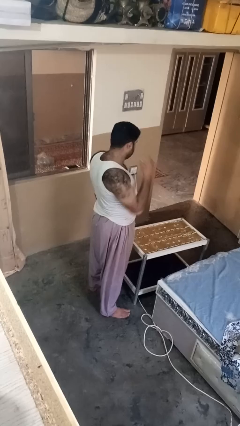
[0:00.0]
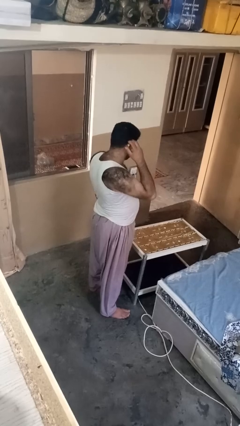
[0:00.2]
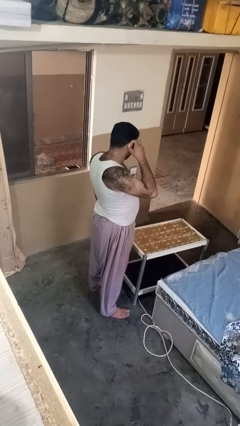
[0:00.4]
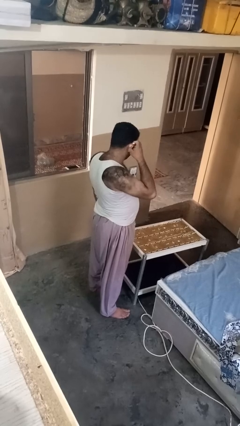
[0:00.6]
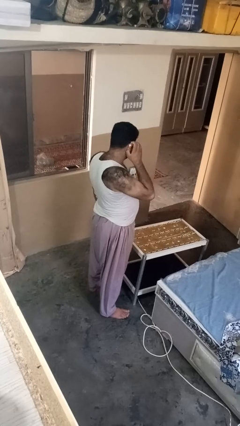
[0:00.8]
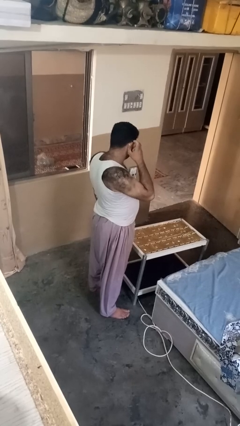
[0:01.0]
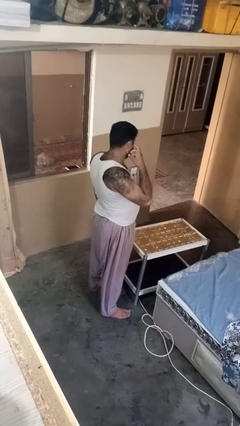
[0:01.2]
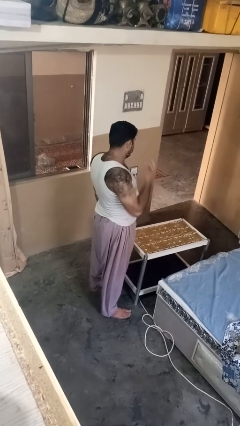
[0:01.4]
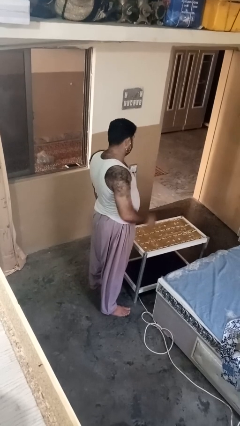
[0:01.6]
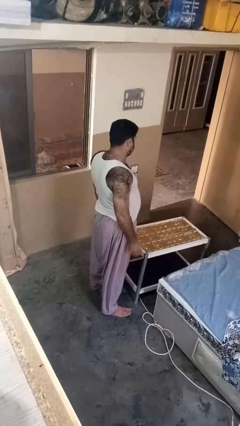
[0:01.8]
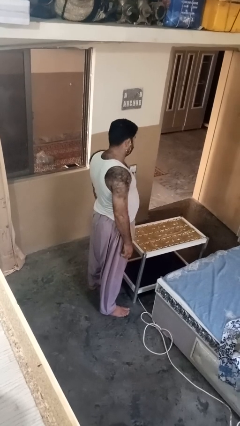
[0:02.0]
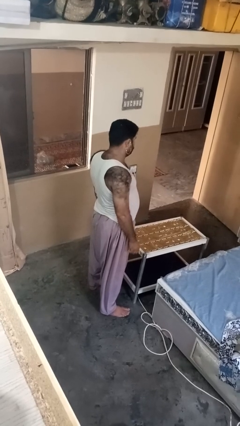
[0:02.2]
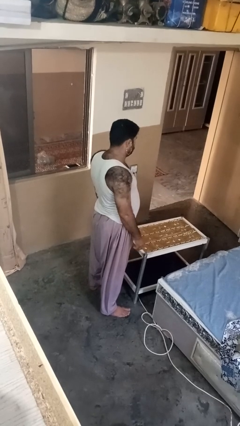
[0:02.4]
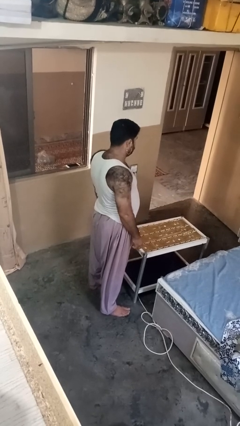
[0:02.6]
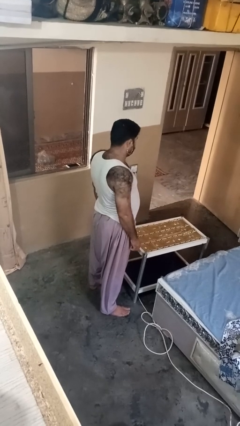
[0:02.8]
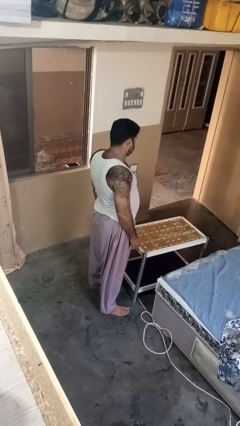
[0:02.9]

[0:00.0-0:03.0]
person puts on earrings

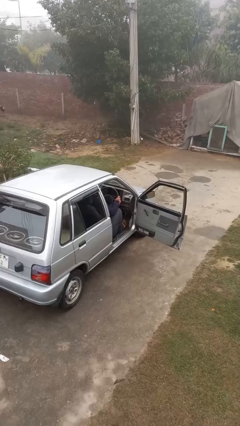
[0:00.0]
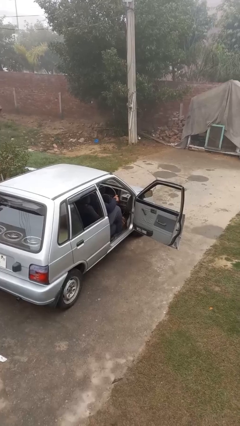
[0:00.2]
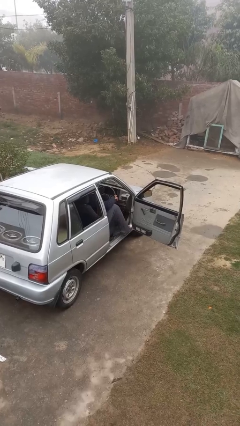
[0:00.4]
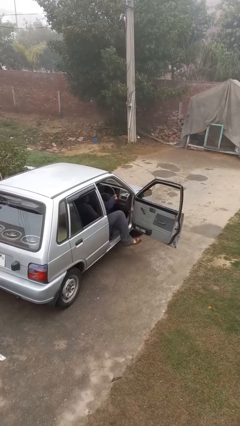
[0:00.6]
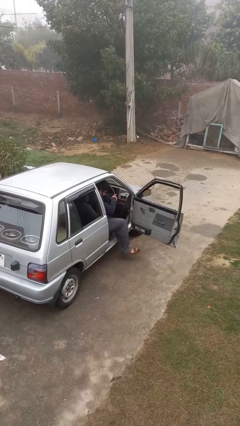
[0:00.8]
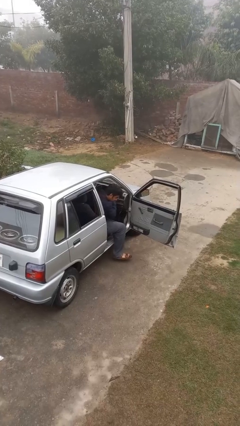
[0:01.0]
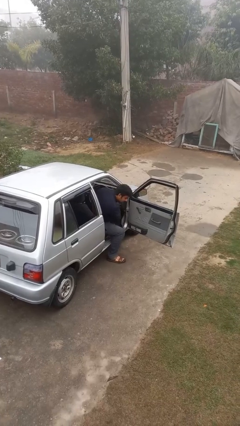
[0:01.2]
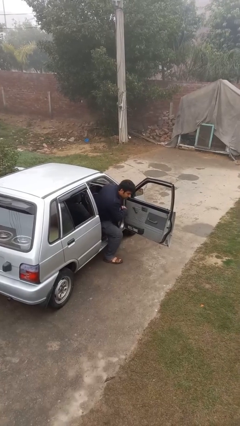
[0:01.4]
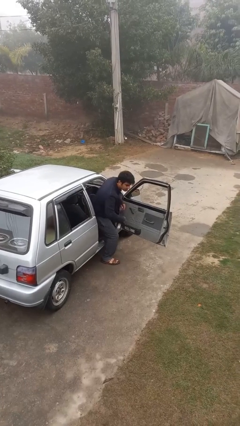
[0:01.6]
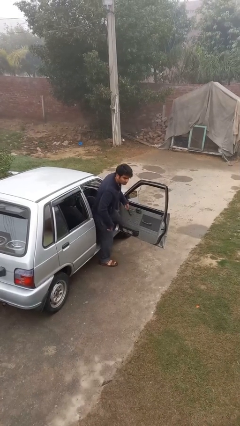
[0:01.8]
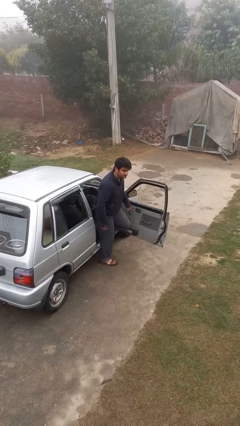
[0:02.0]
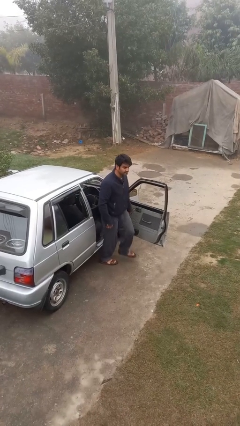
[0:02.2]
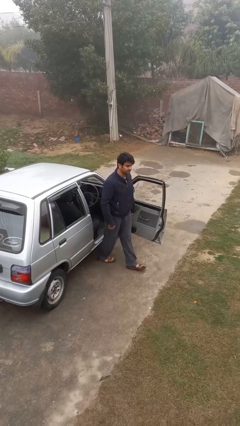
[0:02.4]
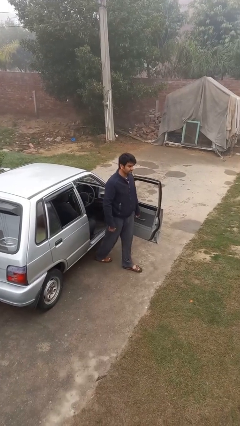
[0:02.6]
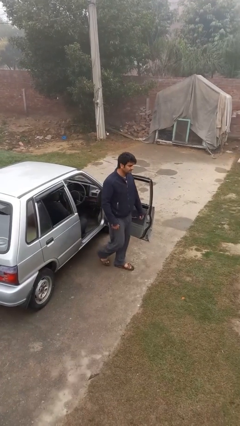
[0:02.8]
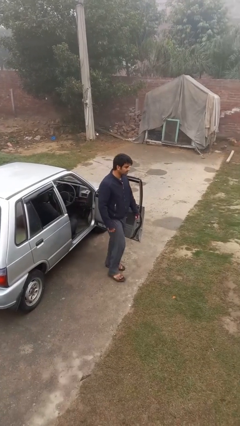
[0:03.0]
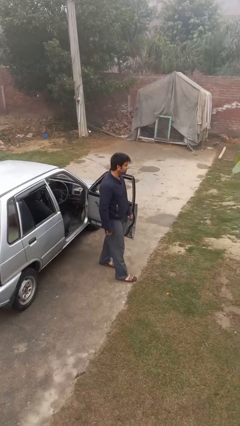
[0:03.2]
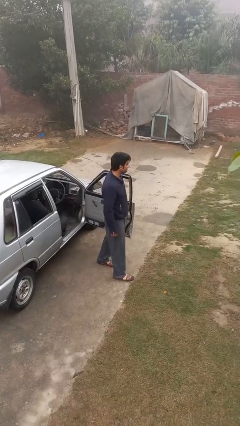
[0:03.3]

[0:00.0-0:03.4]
person exits car

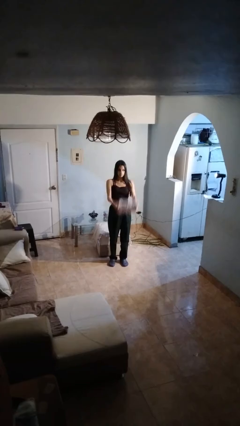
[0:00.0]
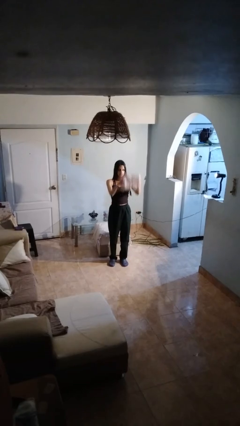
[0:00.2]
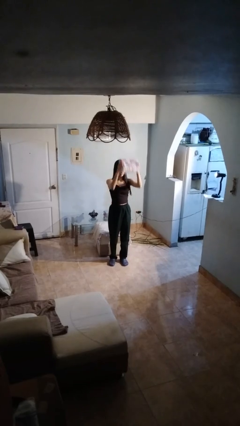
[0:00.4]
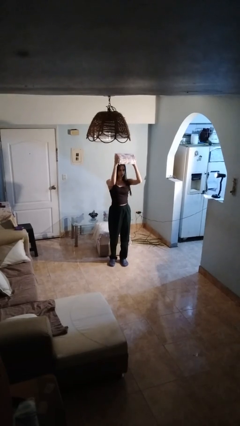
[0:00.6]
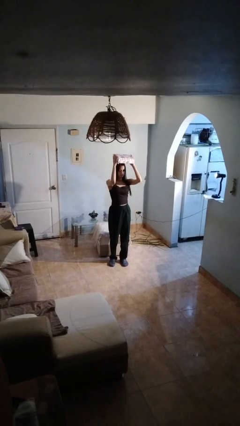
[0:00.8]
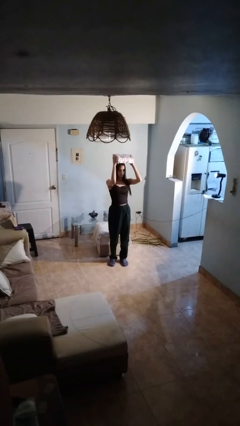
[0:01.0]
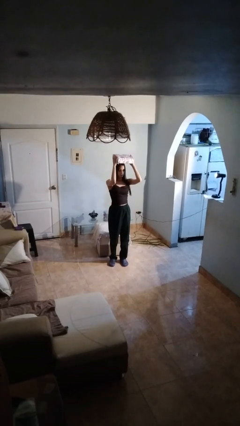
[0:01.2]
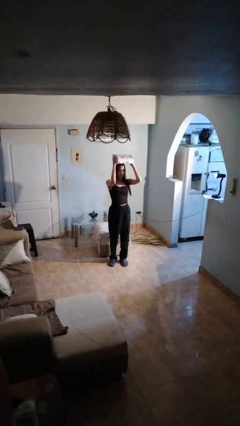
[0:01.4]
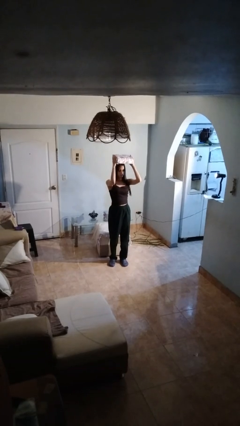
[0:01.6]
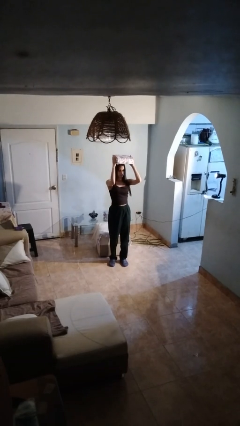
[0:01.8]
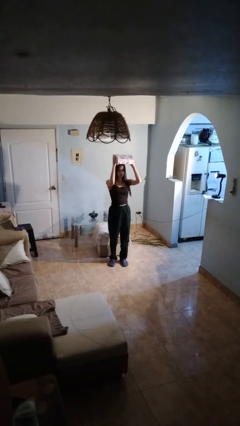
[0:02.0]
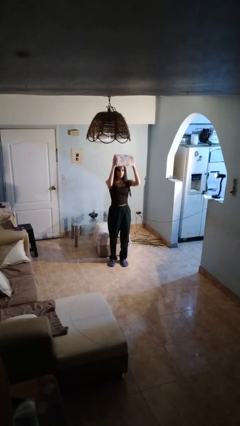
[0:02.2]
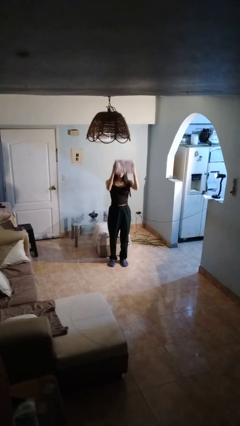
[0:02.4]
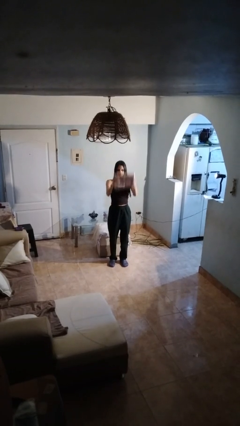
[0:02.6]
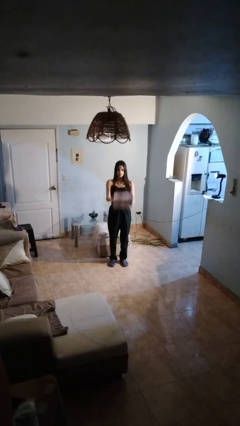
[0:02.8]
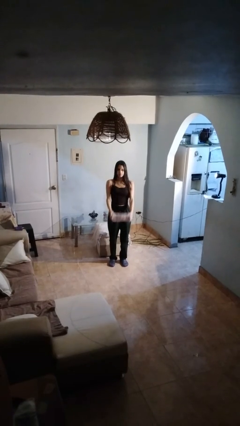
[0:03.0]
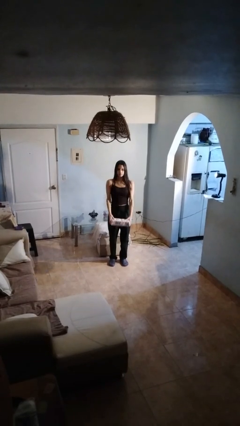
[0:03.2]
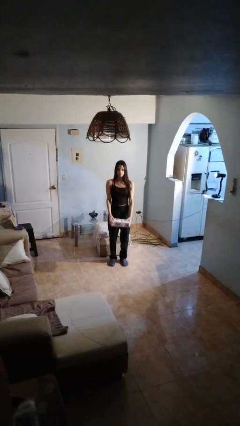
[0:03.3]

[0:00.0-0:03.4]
person holds object above head

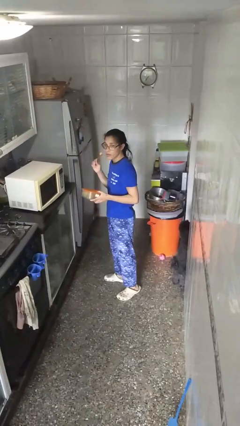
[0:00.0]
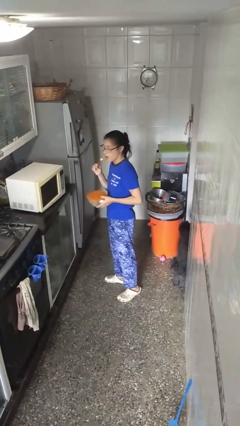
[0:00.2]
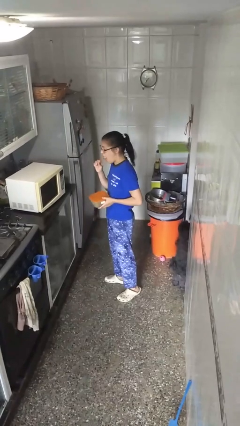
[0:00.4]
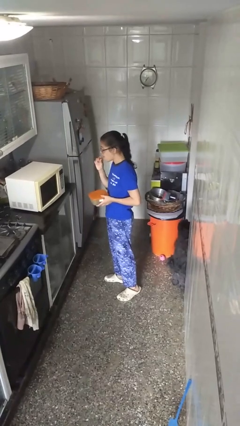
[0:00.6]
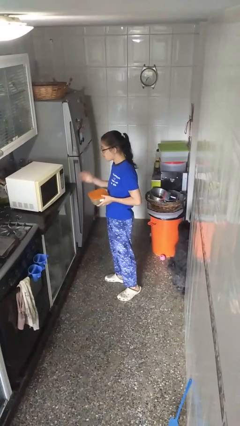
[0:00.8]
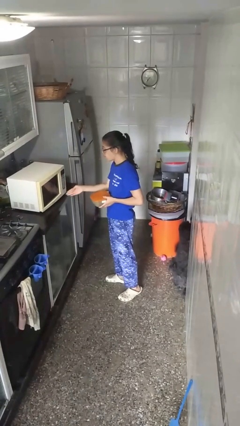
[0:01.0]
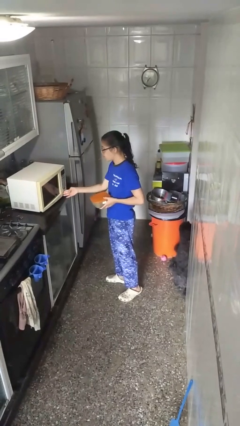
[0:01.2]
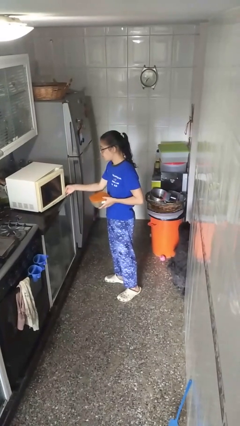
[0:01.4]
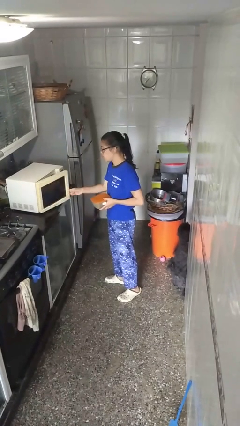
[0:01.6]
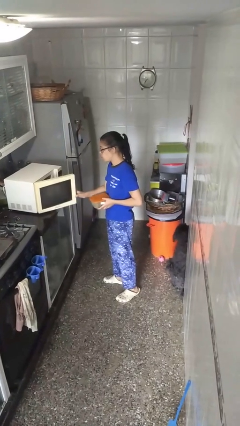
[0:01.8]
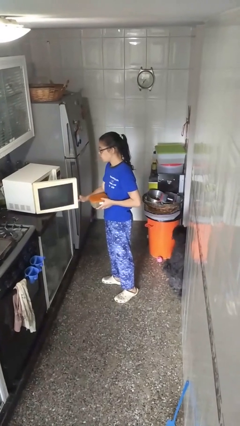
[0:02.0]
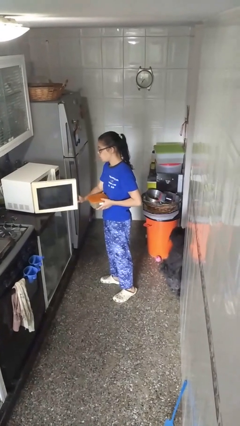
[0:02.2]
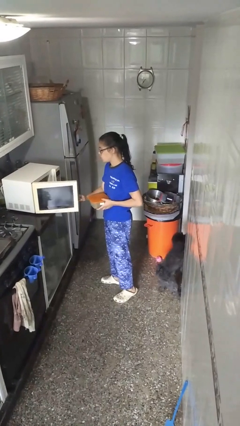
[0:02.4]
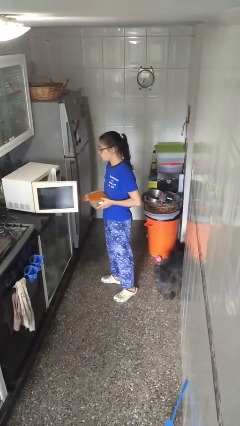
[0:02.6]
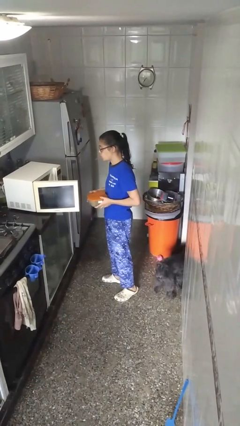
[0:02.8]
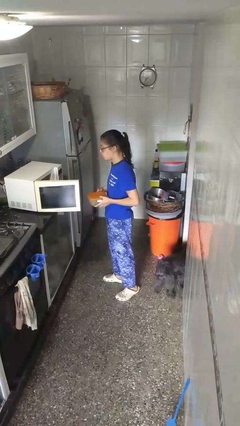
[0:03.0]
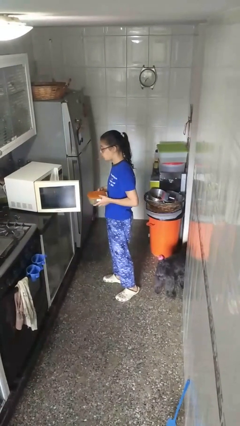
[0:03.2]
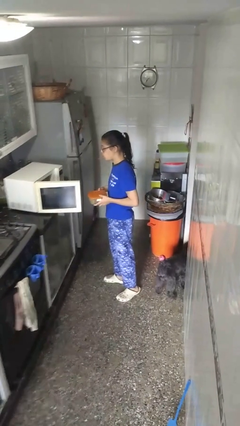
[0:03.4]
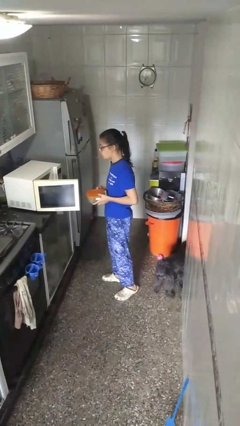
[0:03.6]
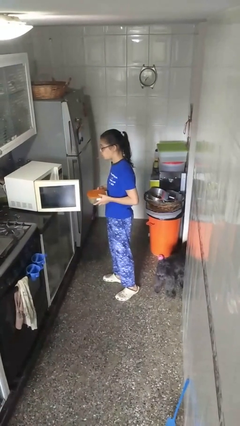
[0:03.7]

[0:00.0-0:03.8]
person opens microwave

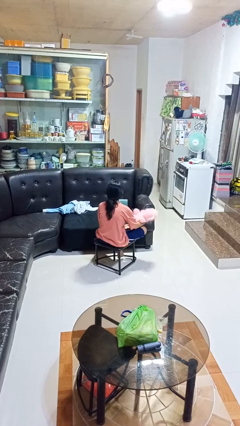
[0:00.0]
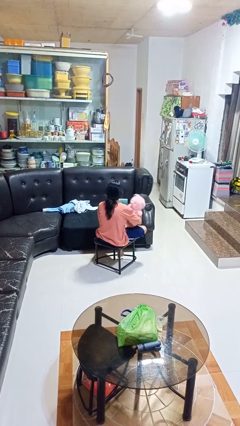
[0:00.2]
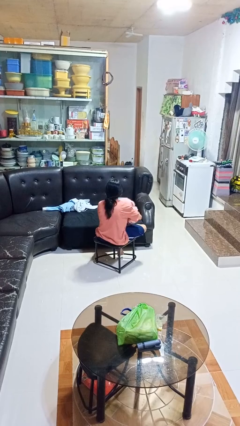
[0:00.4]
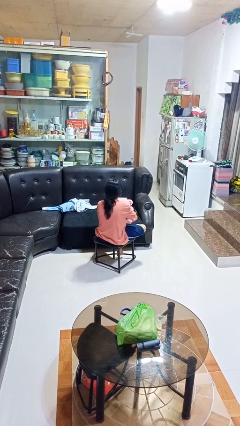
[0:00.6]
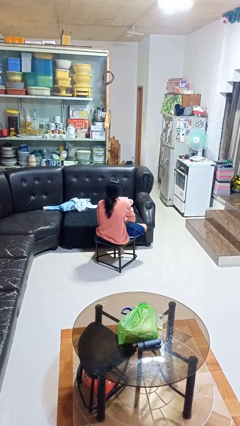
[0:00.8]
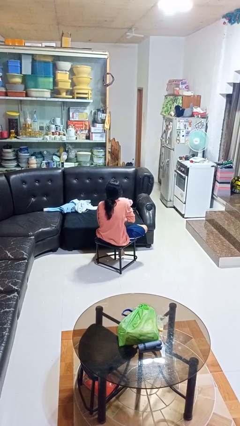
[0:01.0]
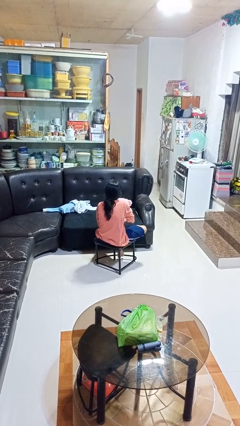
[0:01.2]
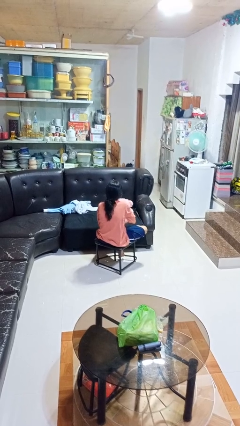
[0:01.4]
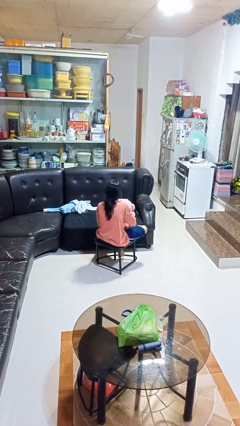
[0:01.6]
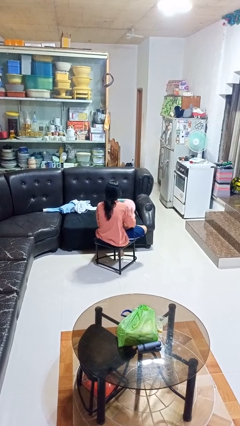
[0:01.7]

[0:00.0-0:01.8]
person hugs stuffed animal

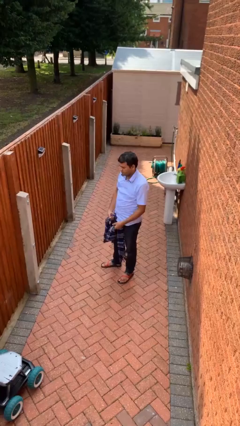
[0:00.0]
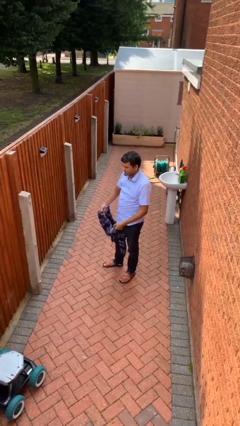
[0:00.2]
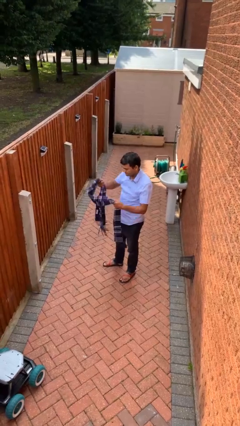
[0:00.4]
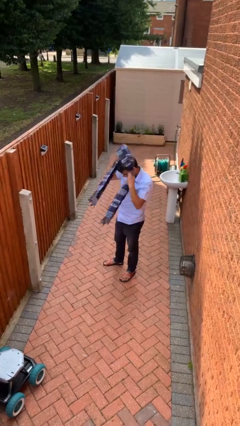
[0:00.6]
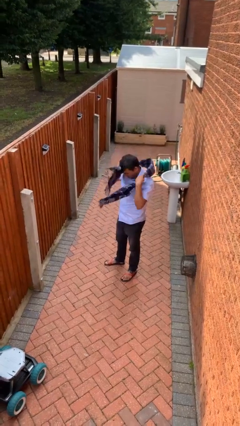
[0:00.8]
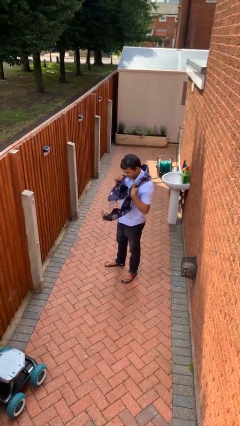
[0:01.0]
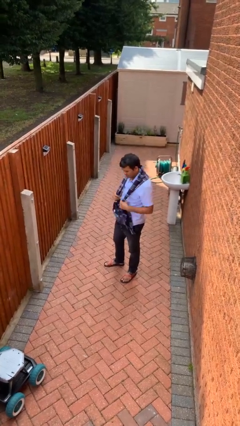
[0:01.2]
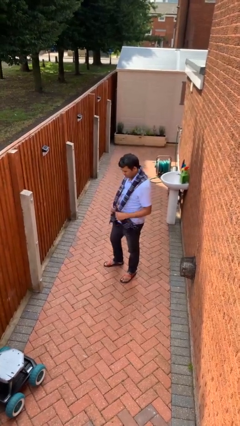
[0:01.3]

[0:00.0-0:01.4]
person puts on scarf

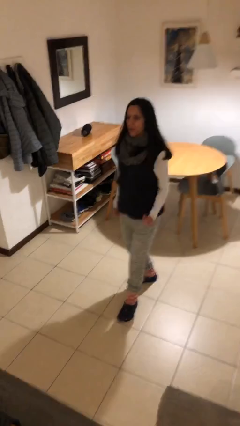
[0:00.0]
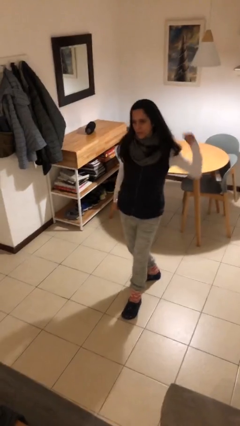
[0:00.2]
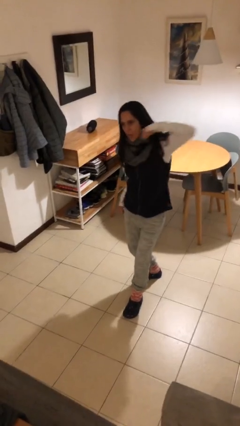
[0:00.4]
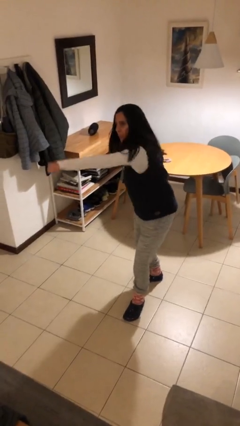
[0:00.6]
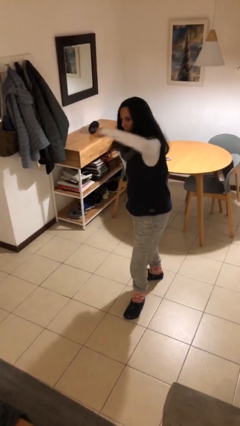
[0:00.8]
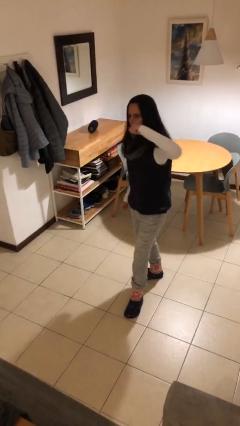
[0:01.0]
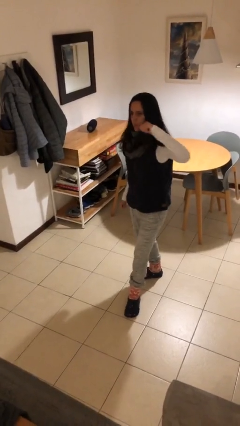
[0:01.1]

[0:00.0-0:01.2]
person punches
